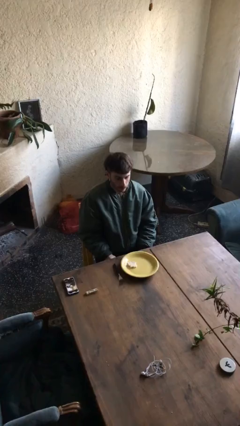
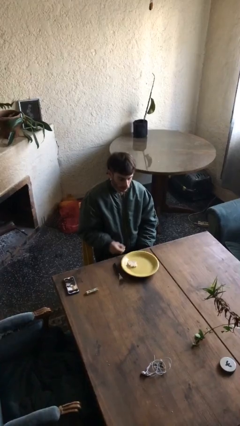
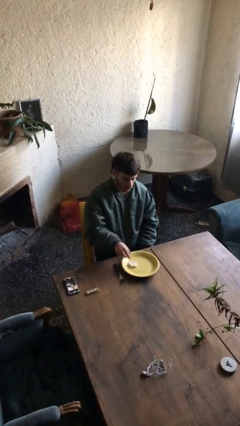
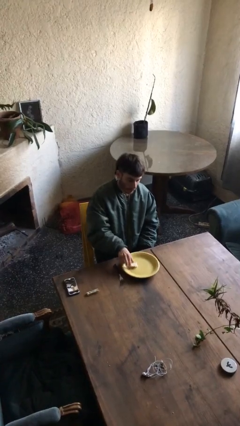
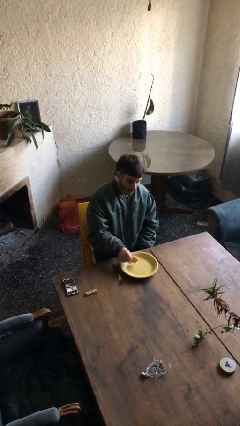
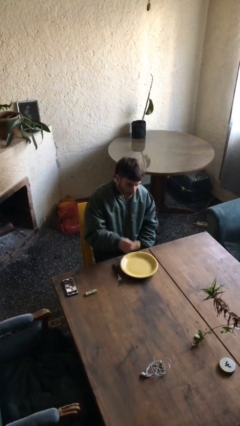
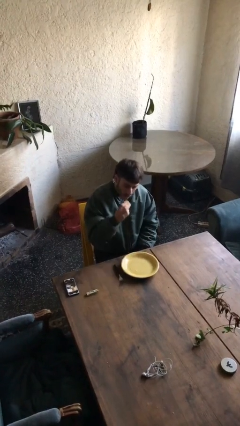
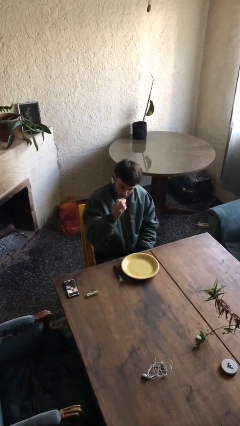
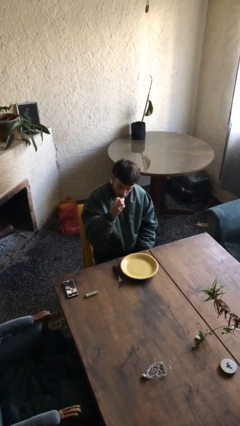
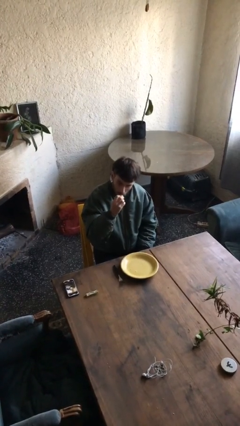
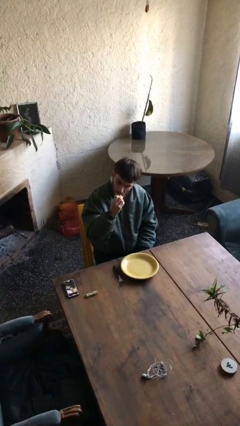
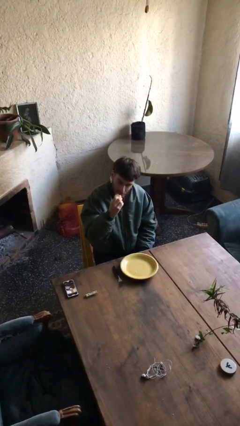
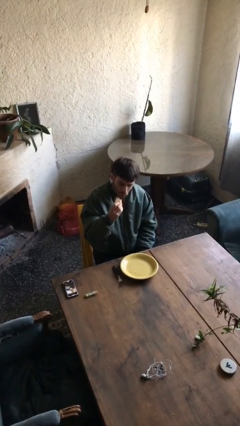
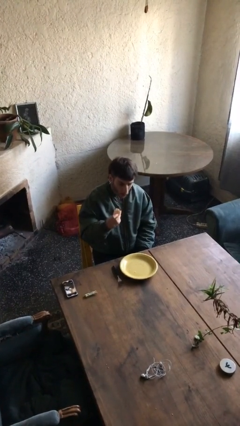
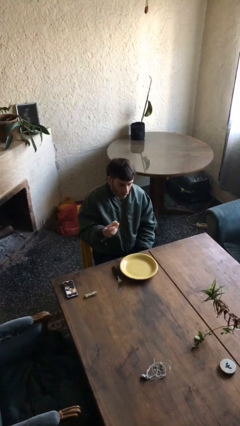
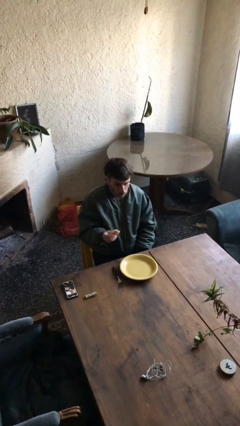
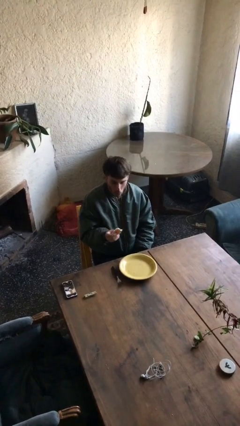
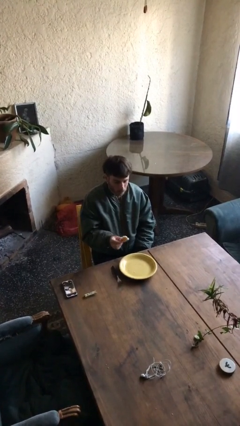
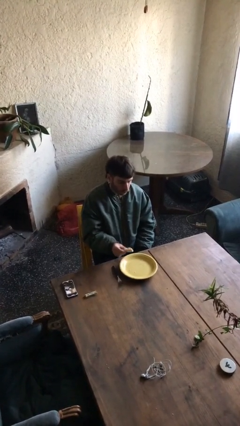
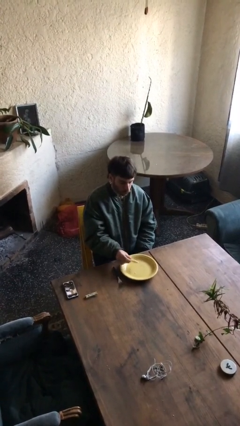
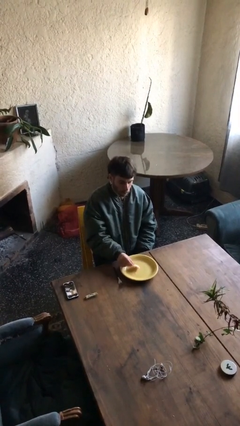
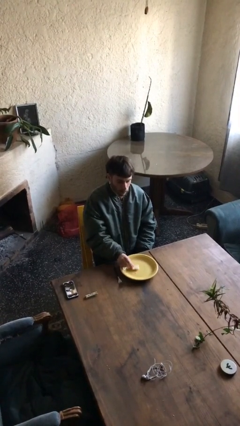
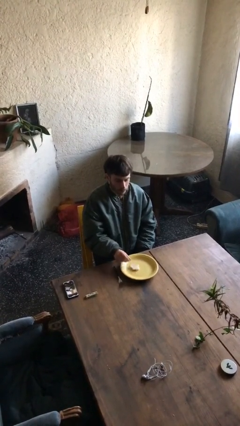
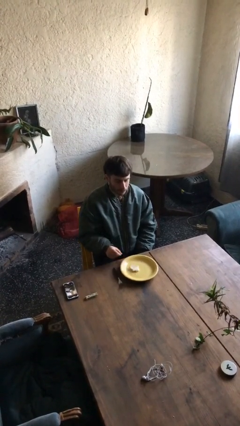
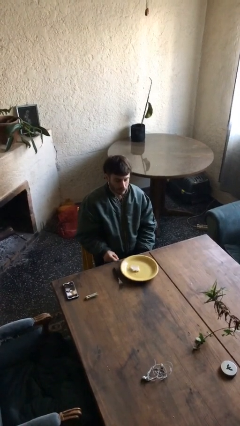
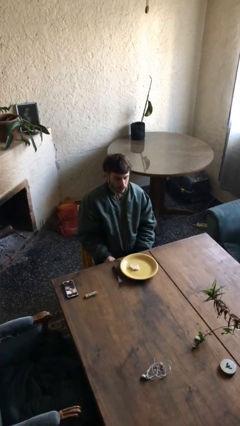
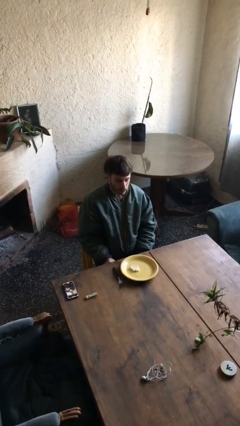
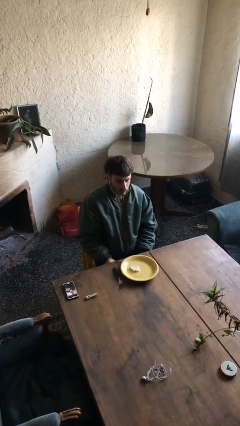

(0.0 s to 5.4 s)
person eats with hands

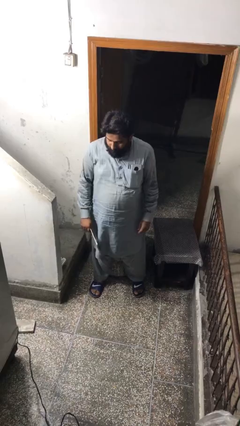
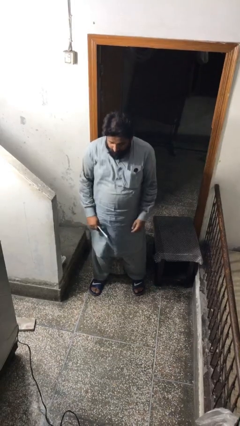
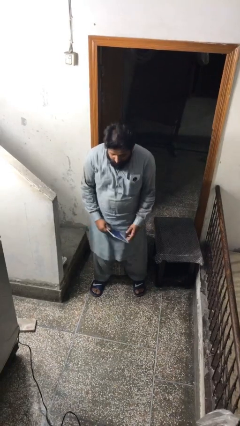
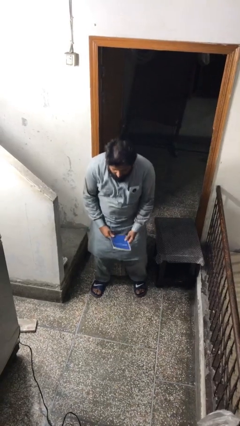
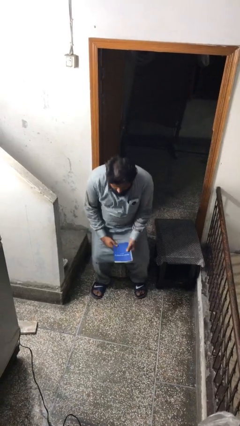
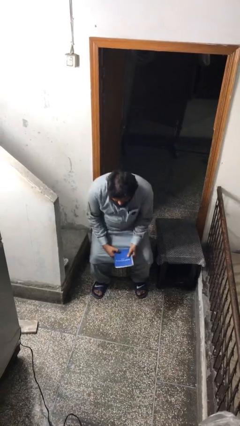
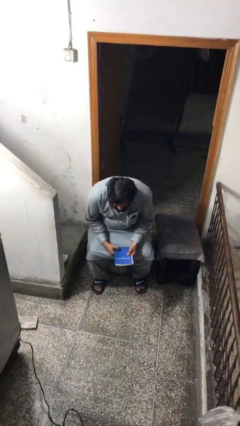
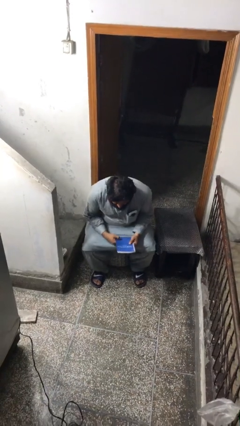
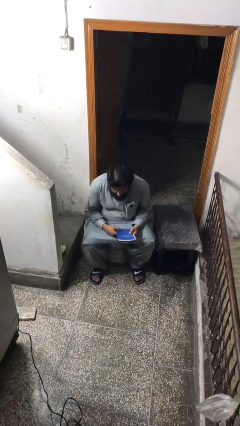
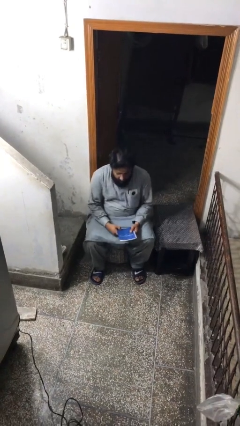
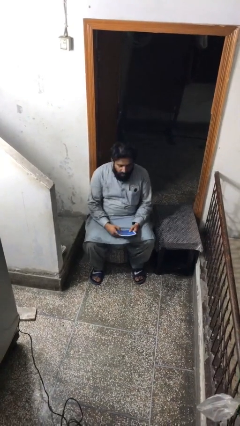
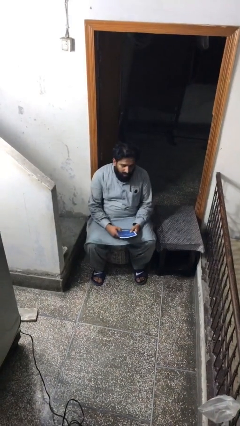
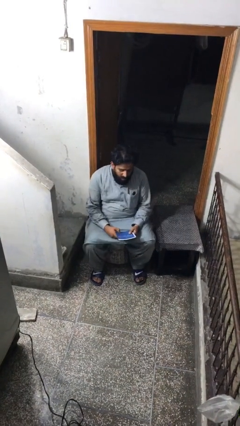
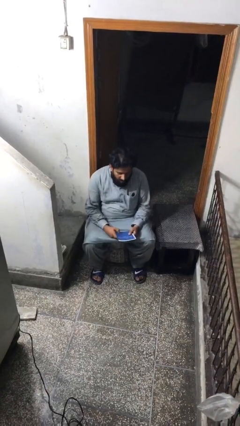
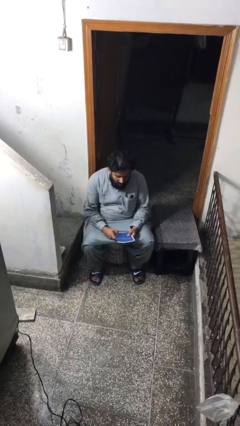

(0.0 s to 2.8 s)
person sits down

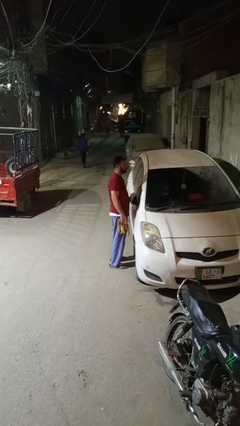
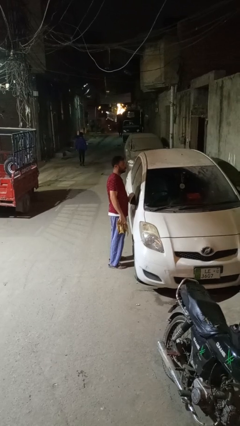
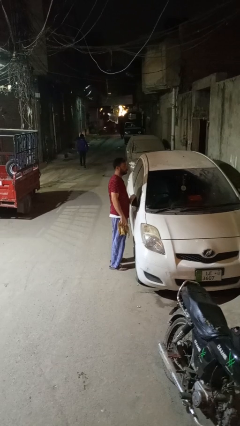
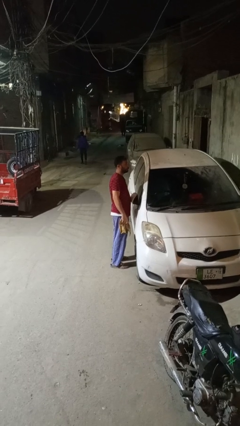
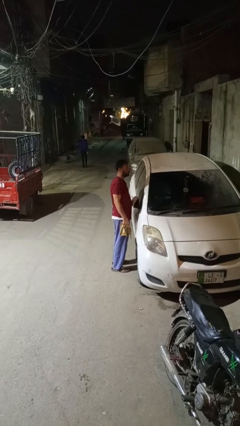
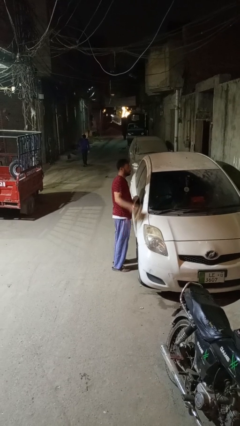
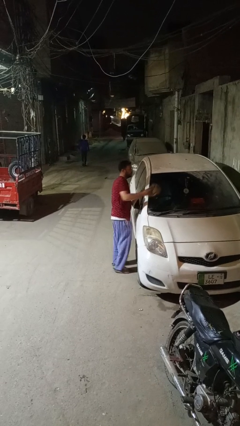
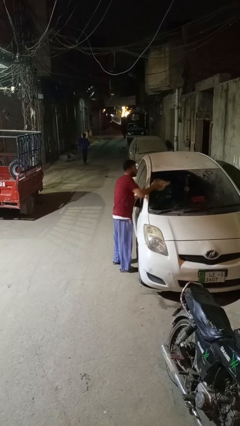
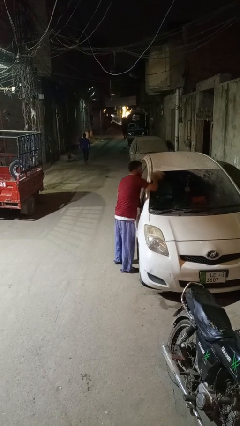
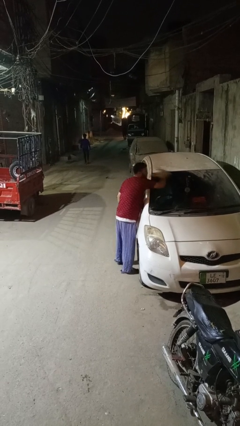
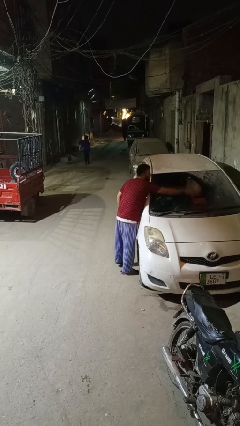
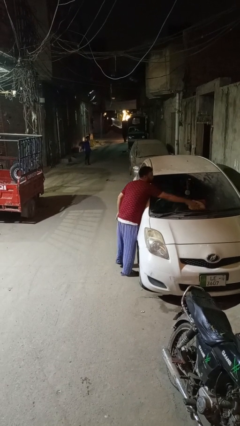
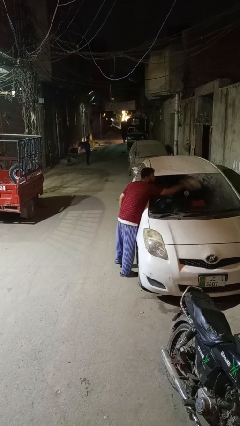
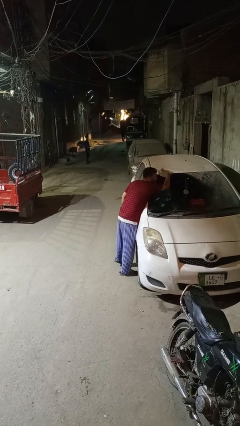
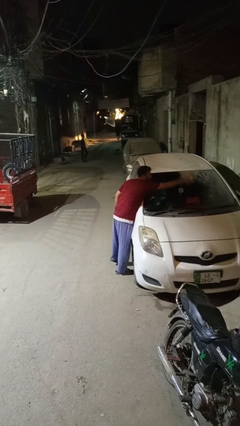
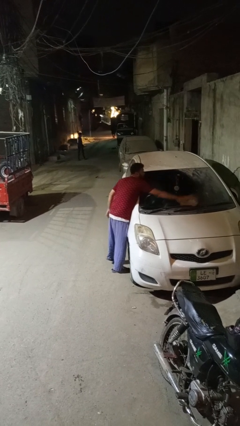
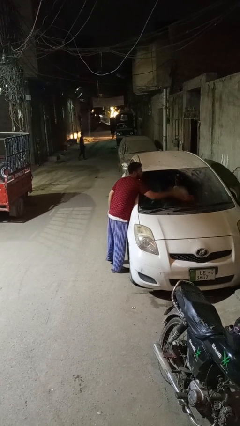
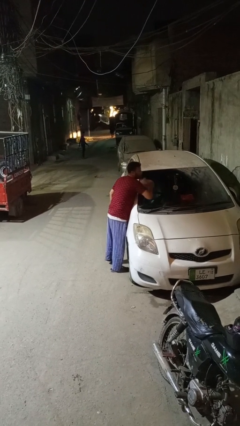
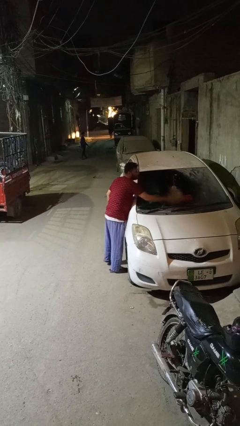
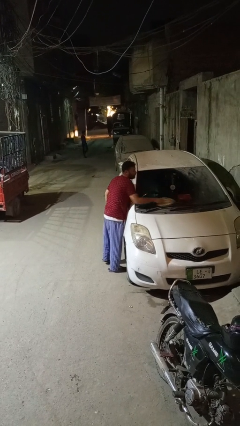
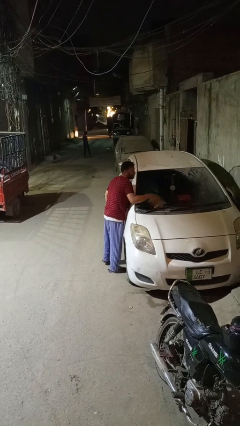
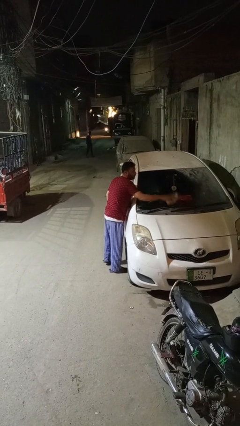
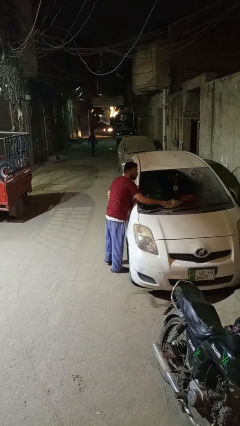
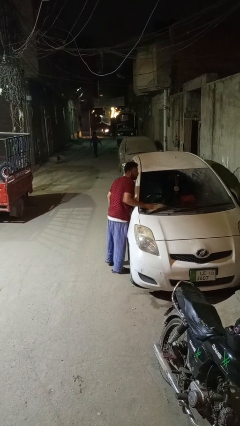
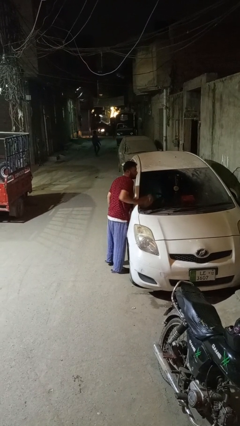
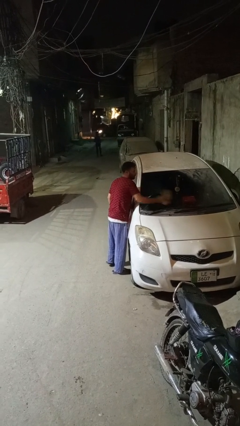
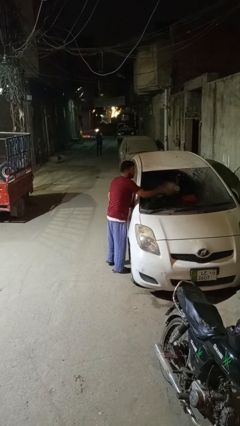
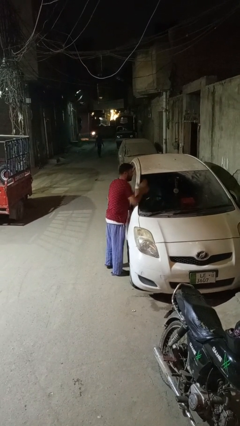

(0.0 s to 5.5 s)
person polishes car with rag

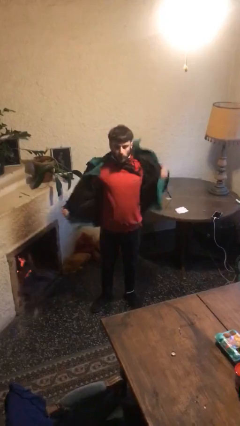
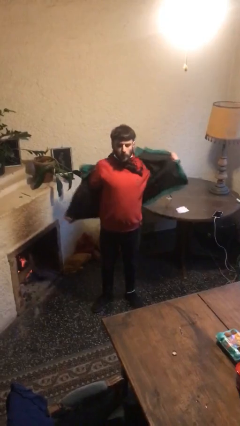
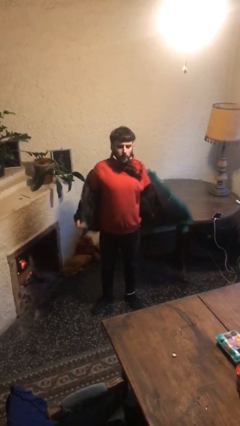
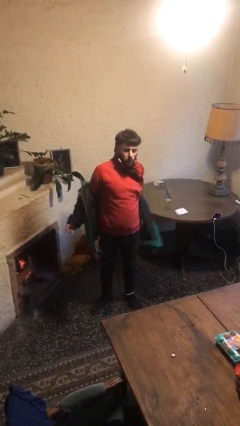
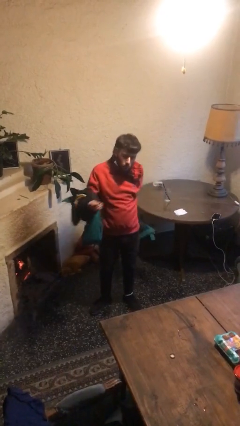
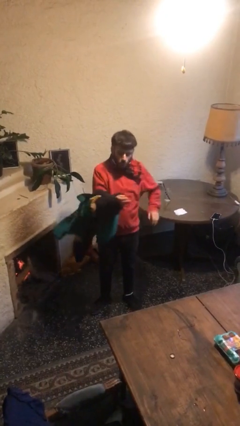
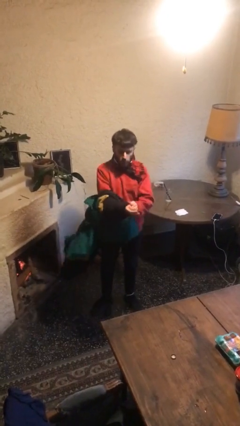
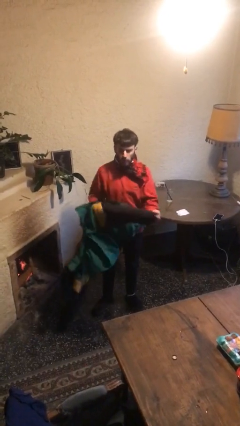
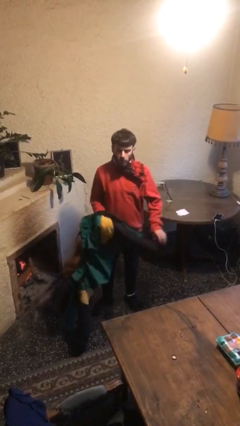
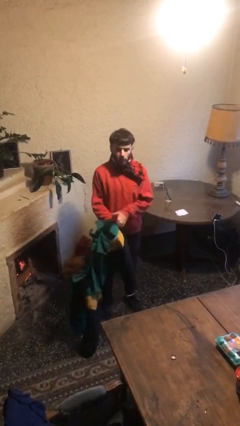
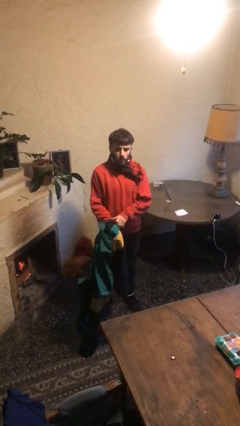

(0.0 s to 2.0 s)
person takes off jacket

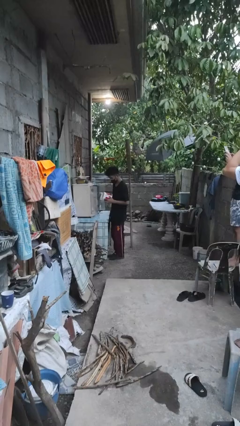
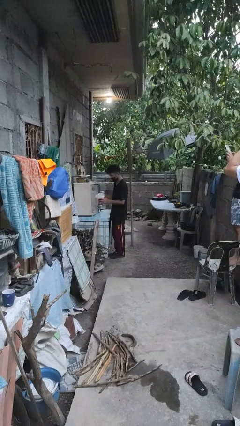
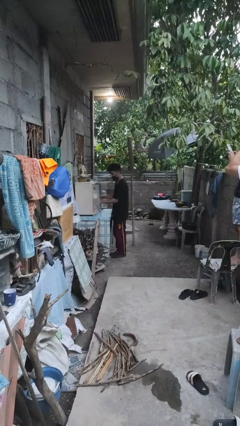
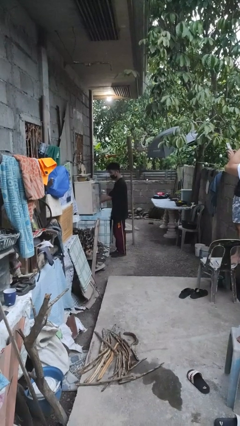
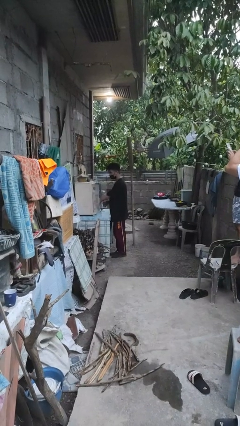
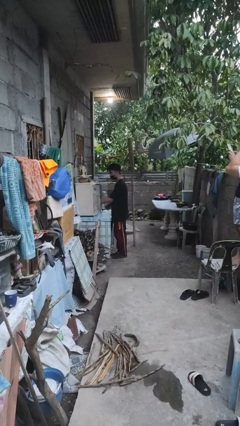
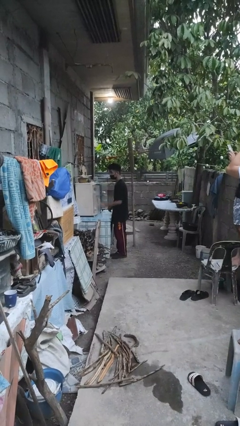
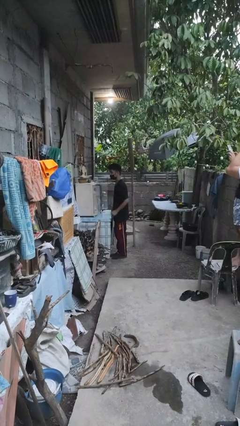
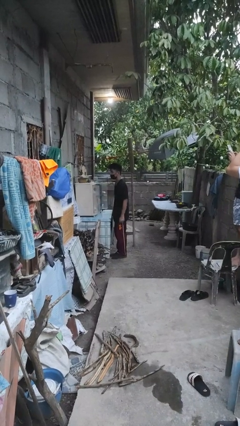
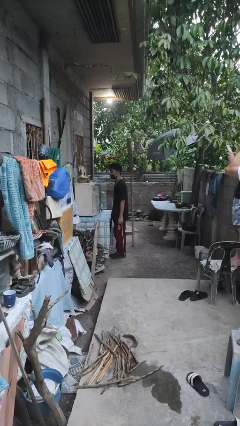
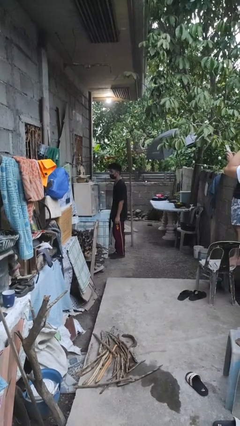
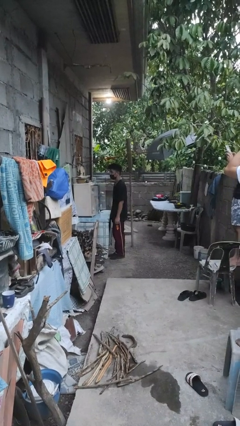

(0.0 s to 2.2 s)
person puts down object into cabinet
